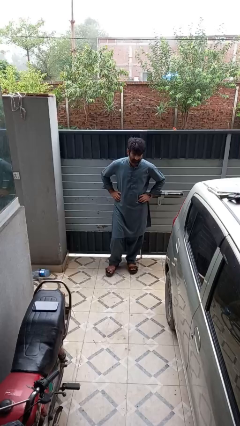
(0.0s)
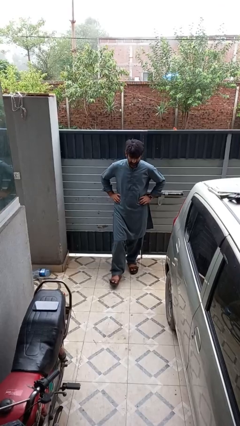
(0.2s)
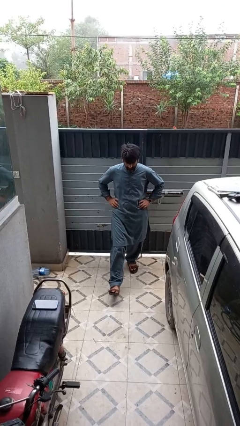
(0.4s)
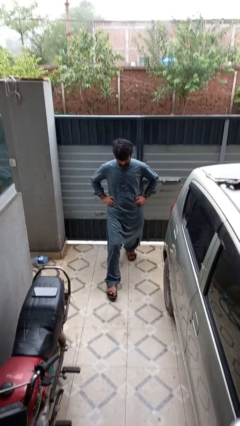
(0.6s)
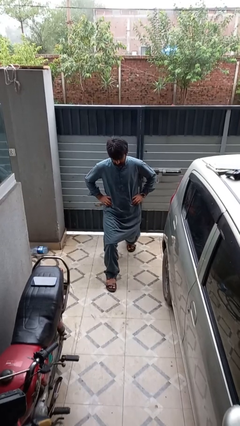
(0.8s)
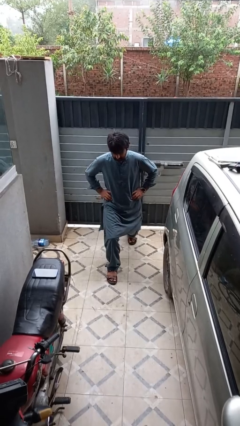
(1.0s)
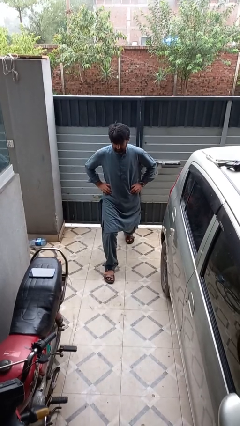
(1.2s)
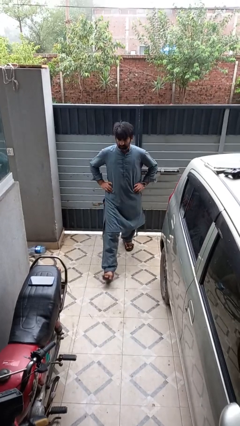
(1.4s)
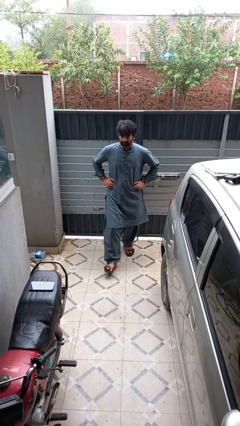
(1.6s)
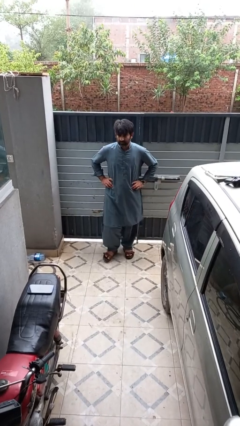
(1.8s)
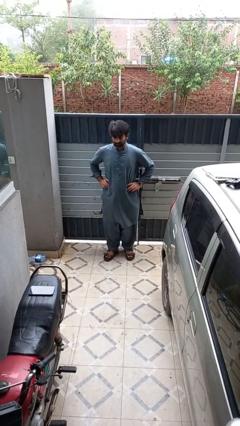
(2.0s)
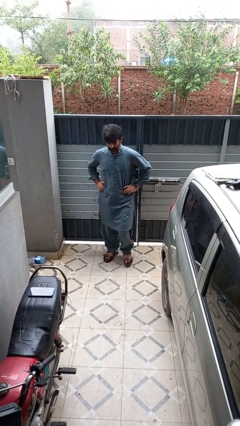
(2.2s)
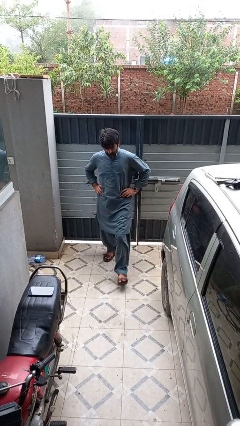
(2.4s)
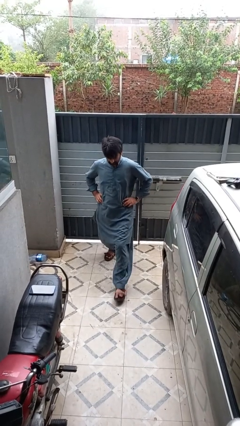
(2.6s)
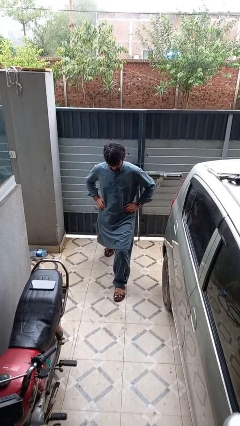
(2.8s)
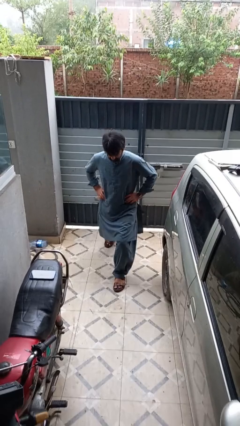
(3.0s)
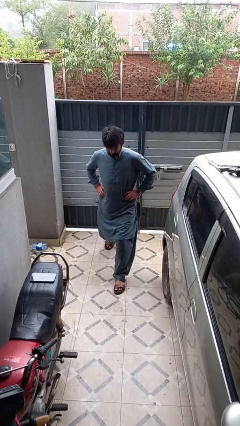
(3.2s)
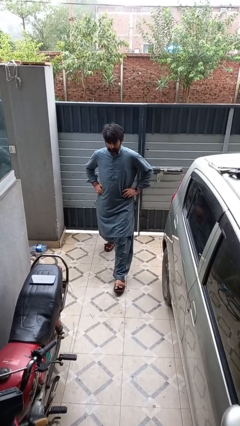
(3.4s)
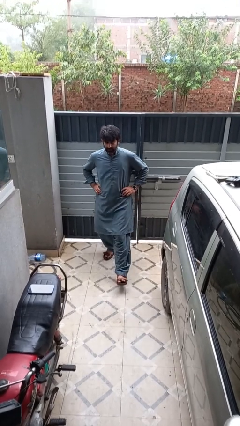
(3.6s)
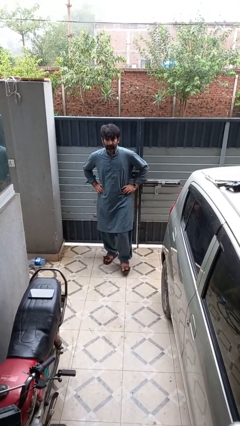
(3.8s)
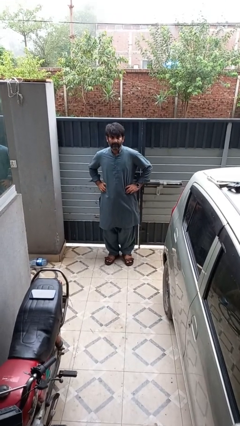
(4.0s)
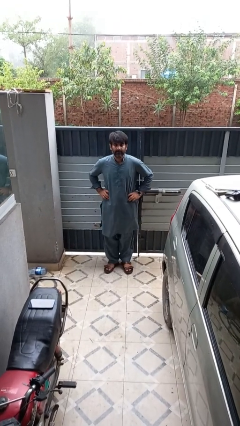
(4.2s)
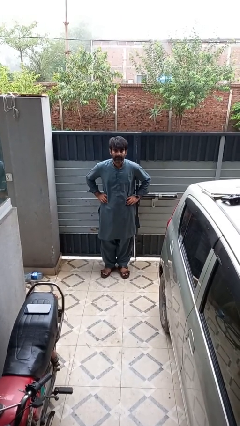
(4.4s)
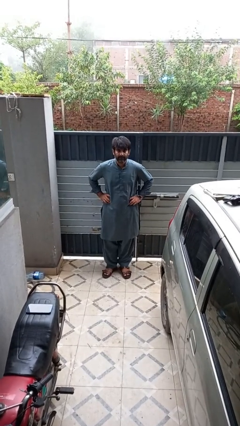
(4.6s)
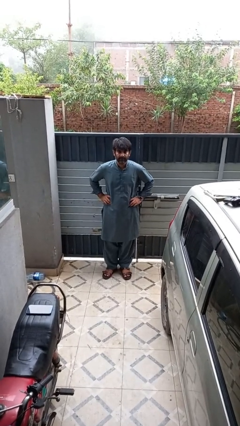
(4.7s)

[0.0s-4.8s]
person exercises with lunges

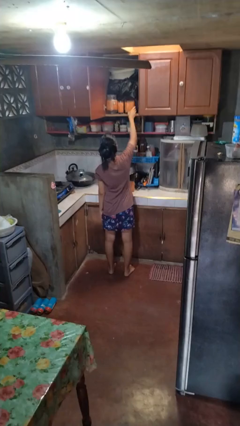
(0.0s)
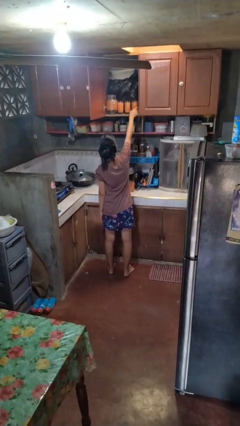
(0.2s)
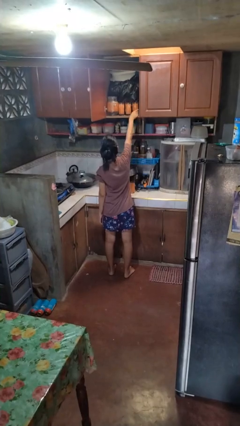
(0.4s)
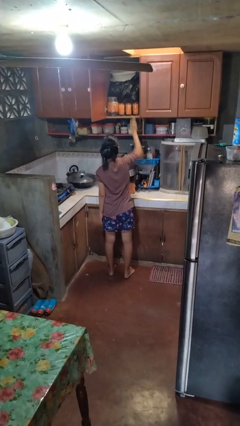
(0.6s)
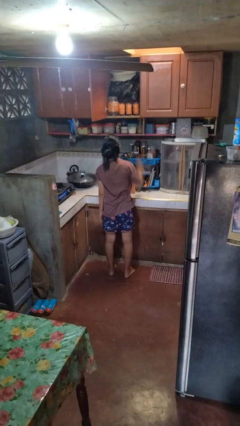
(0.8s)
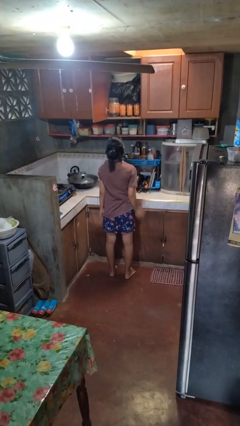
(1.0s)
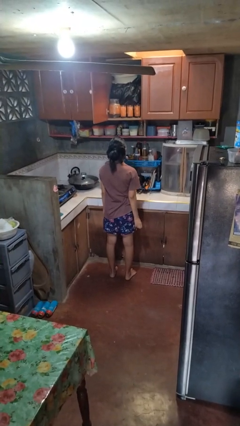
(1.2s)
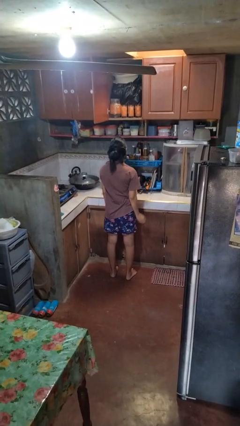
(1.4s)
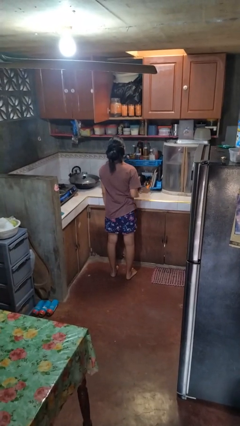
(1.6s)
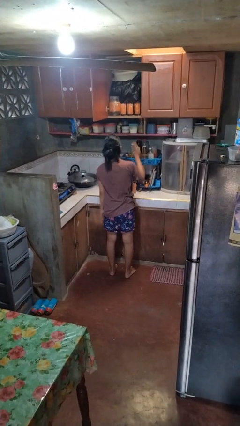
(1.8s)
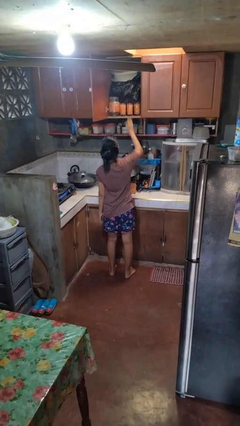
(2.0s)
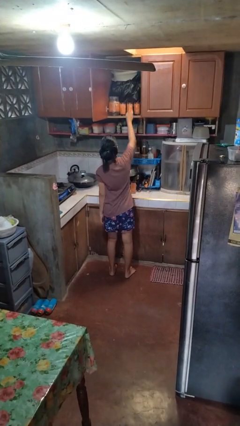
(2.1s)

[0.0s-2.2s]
person puts object in cabinet

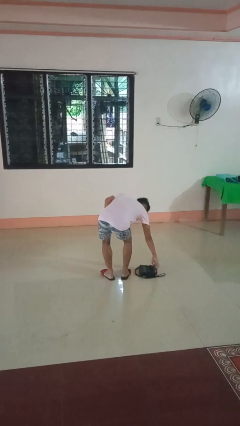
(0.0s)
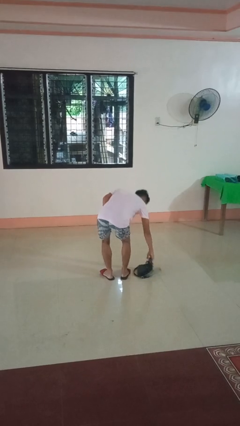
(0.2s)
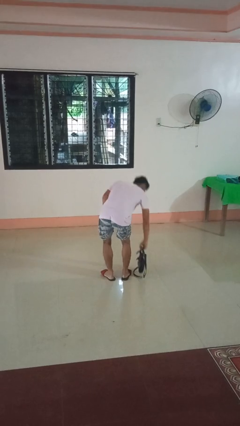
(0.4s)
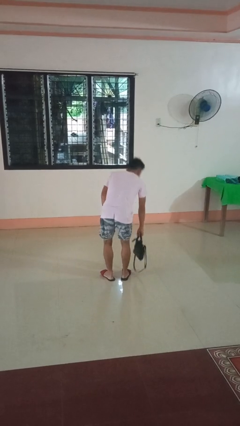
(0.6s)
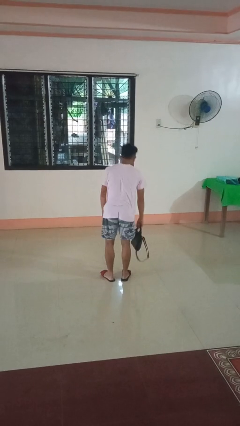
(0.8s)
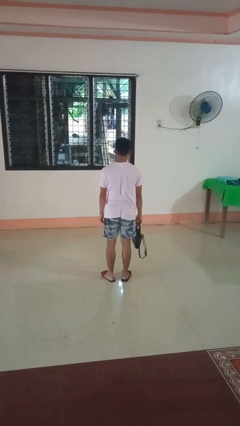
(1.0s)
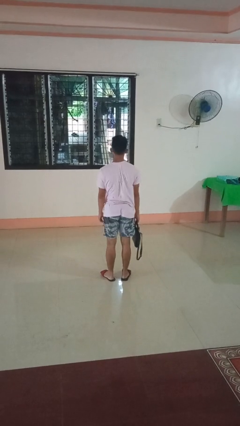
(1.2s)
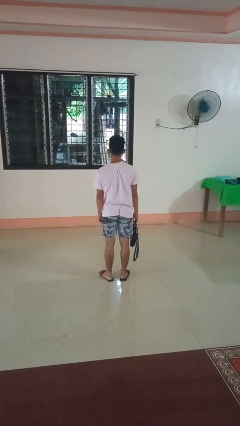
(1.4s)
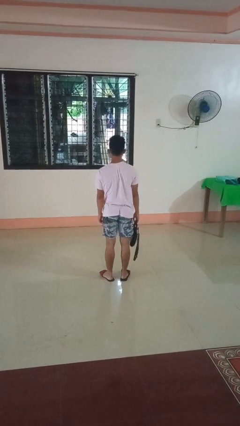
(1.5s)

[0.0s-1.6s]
person picks up object from floor

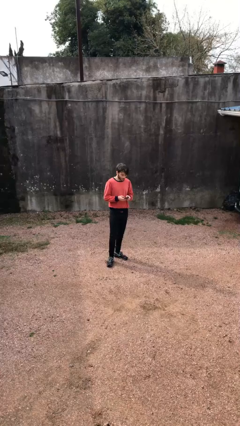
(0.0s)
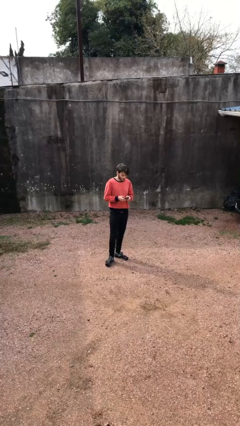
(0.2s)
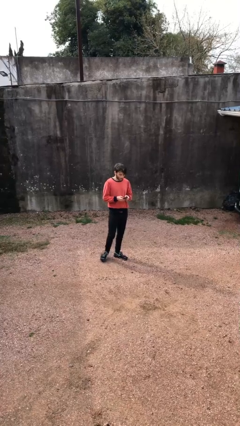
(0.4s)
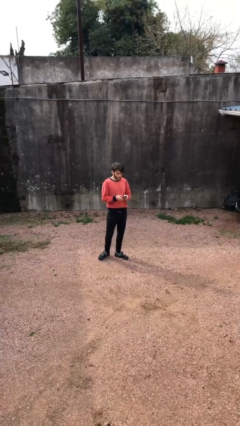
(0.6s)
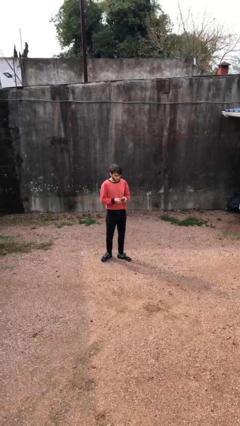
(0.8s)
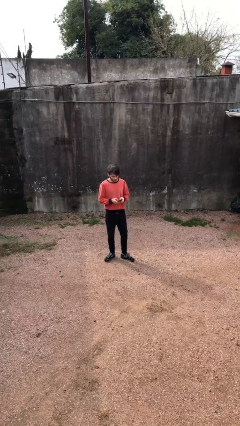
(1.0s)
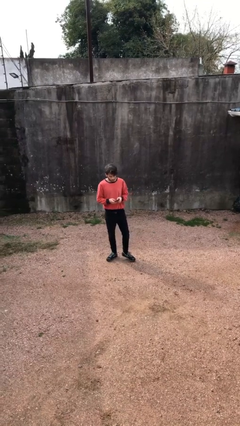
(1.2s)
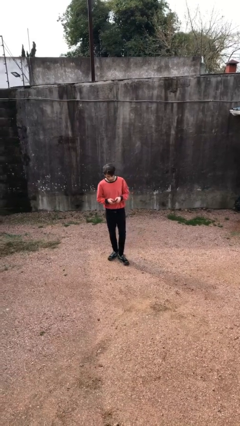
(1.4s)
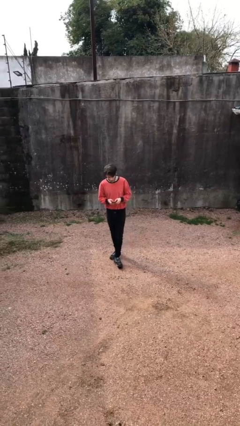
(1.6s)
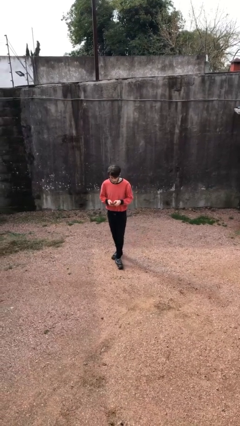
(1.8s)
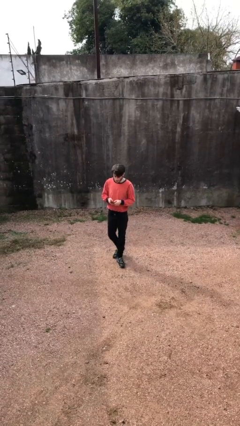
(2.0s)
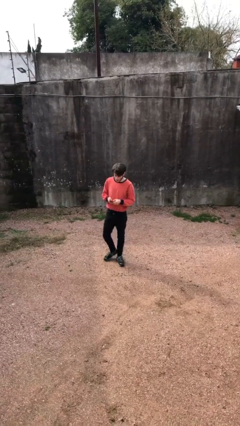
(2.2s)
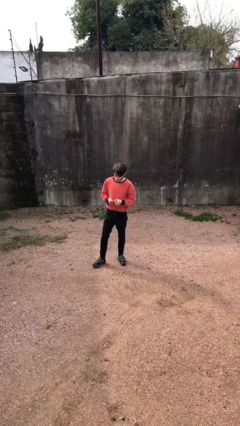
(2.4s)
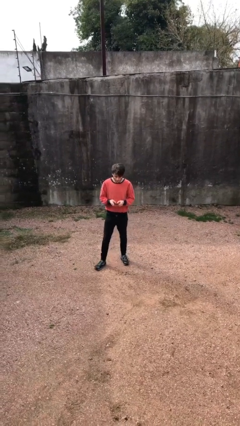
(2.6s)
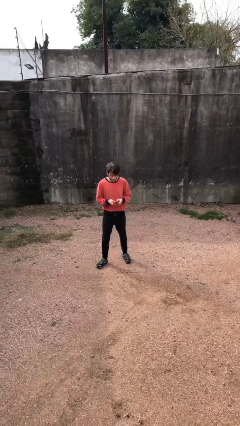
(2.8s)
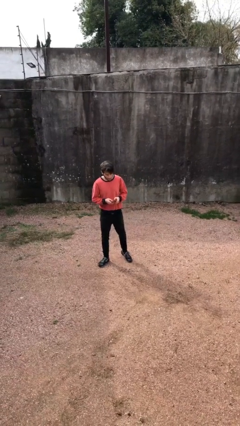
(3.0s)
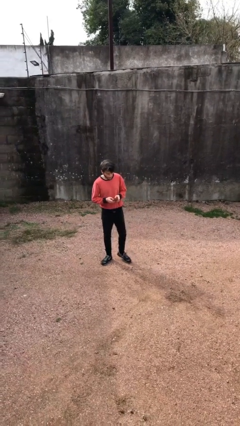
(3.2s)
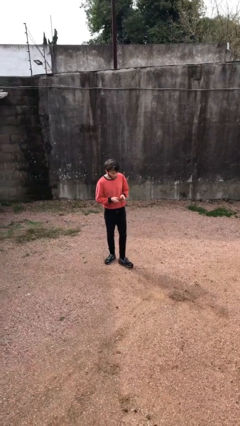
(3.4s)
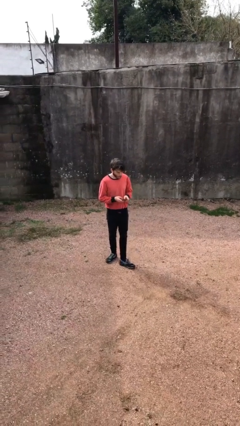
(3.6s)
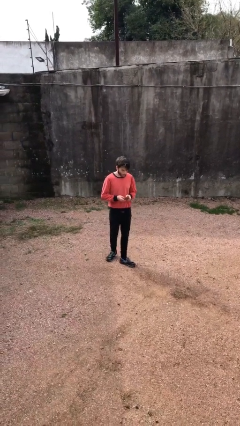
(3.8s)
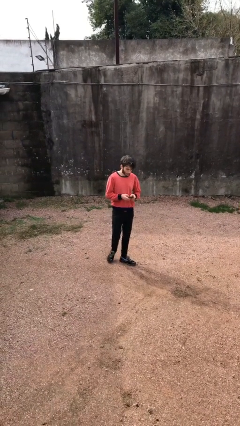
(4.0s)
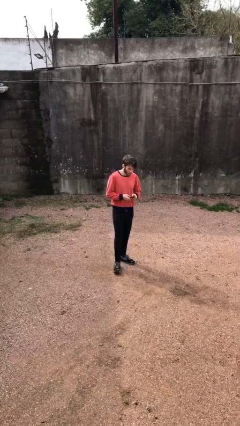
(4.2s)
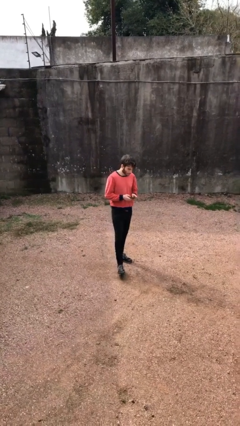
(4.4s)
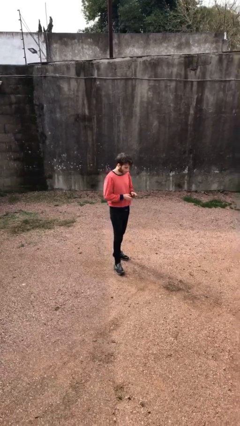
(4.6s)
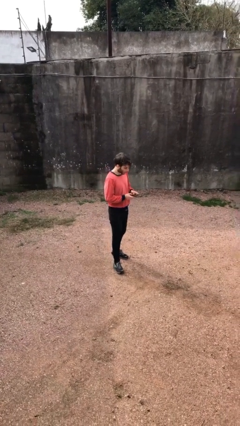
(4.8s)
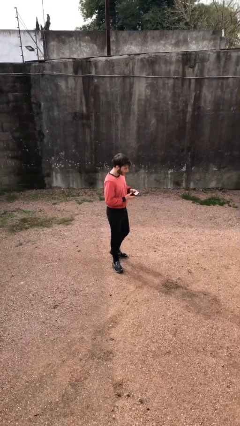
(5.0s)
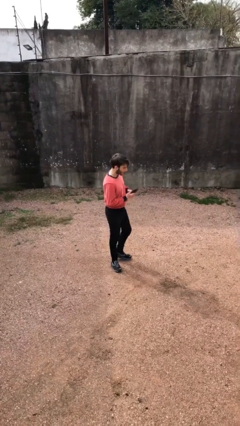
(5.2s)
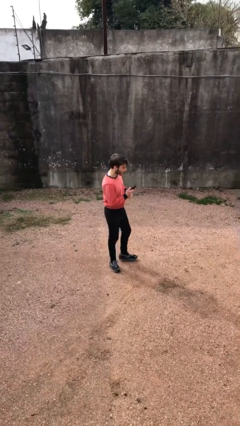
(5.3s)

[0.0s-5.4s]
person texts on phone

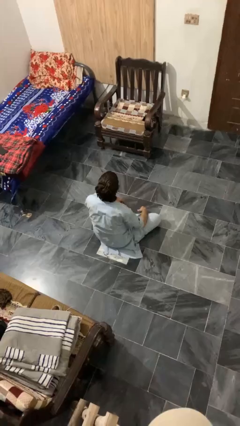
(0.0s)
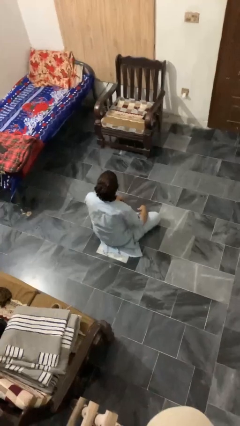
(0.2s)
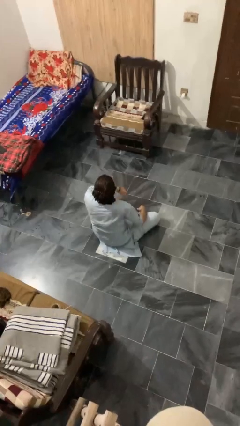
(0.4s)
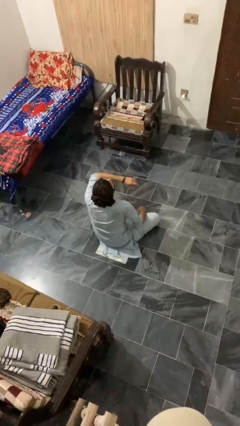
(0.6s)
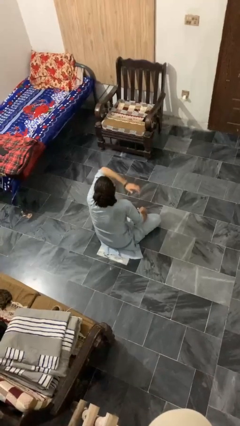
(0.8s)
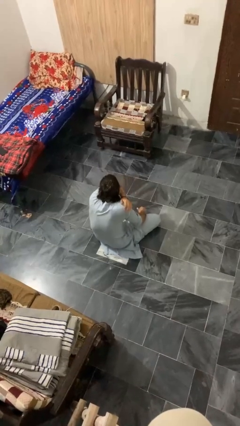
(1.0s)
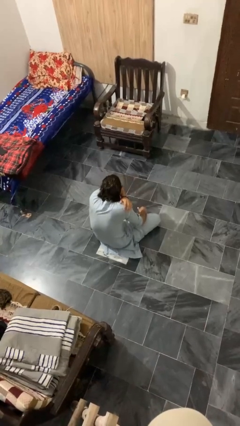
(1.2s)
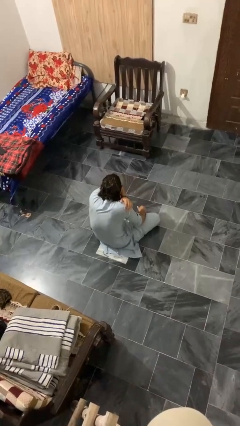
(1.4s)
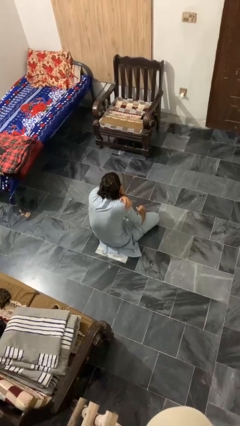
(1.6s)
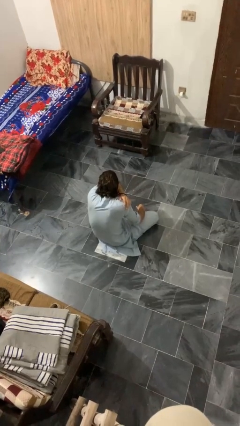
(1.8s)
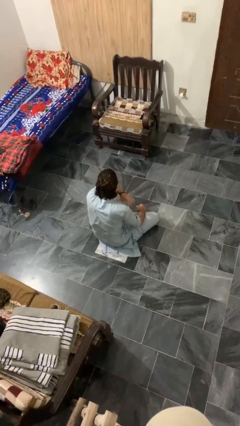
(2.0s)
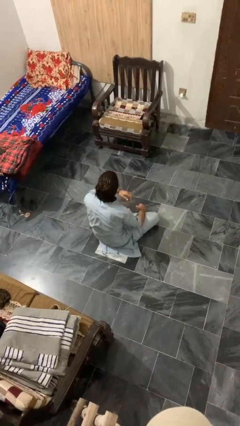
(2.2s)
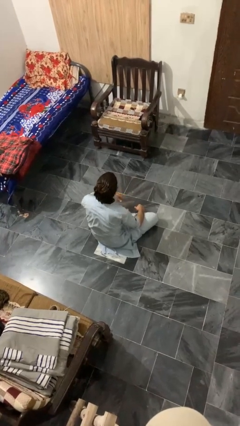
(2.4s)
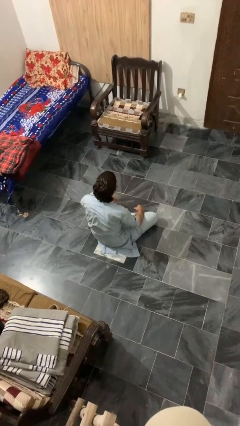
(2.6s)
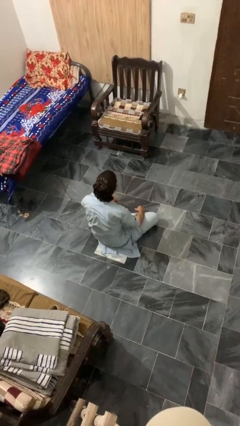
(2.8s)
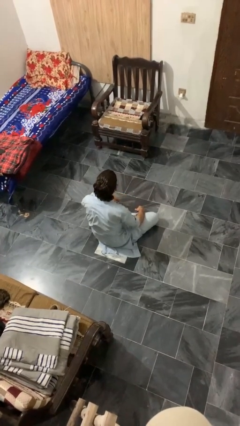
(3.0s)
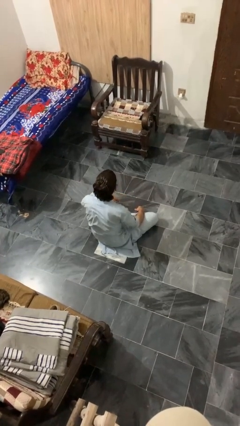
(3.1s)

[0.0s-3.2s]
person sneezes into arm

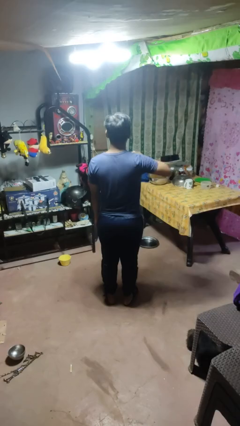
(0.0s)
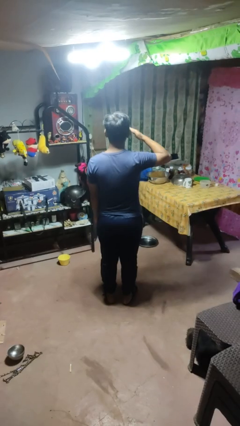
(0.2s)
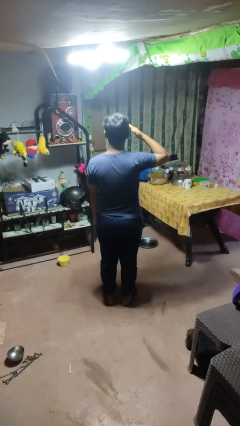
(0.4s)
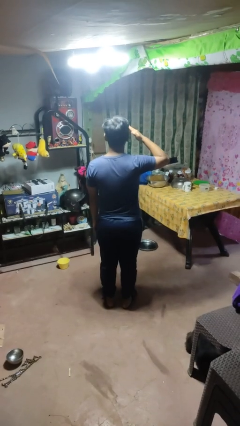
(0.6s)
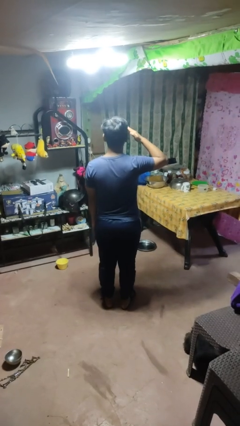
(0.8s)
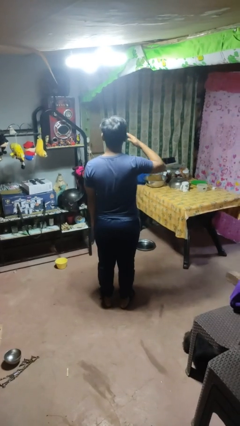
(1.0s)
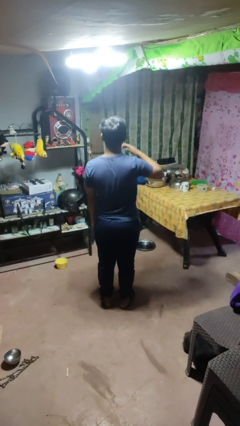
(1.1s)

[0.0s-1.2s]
person salutes
